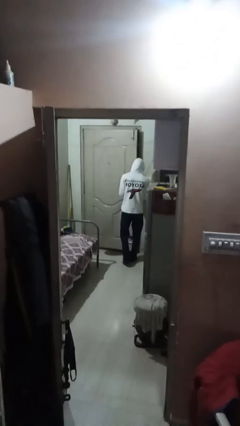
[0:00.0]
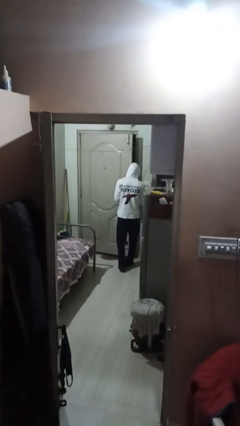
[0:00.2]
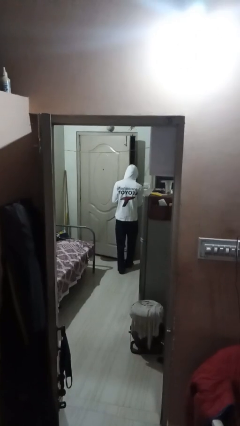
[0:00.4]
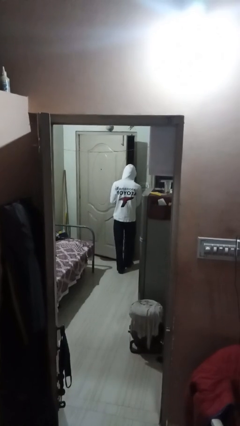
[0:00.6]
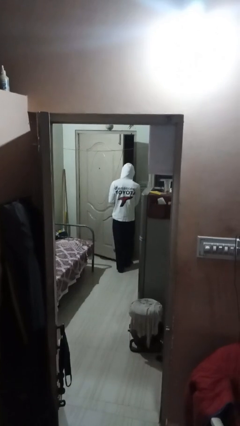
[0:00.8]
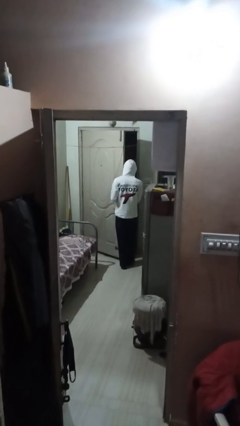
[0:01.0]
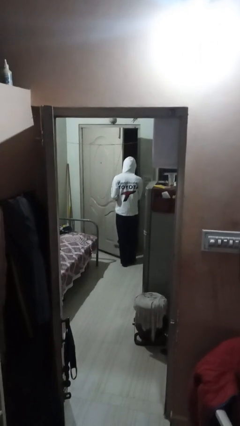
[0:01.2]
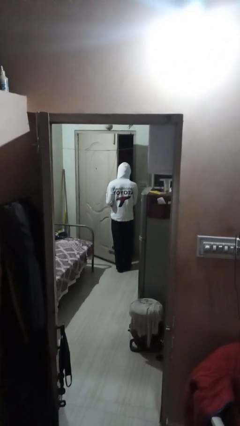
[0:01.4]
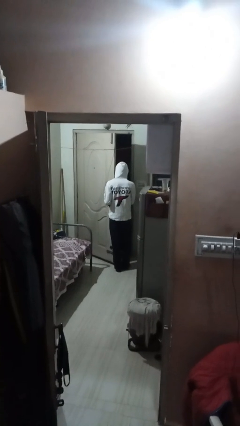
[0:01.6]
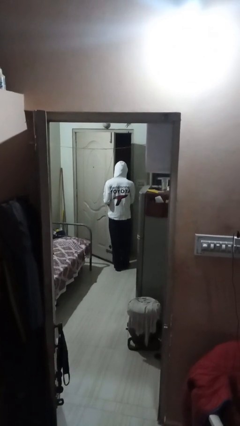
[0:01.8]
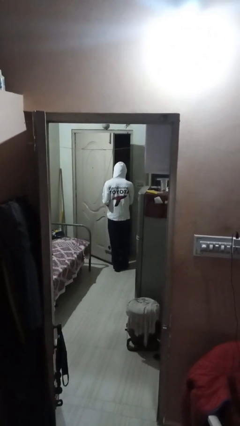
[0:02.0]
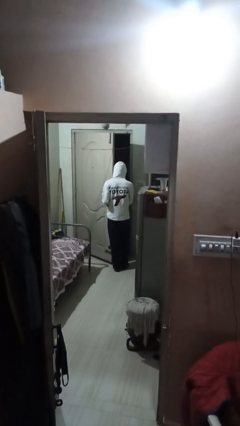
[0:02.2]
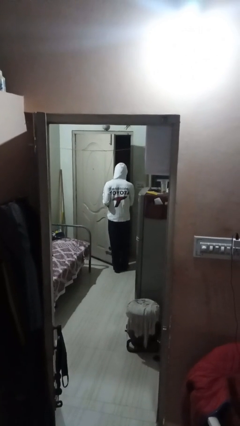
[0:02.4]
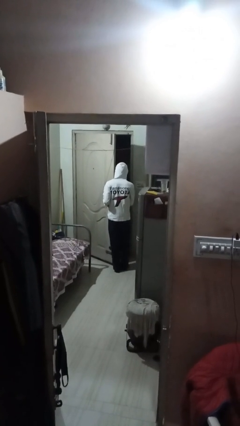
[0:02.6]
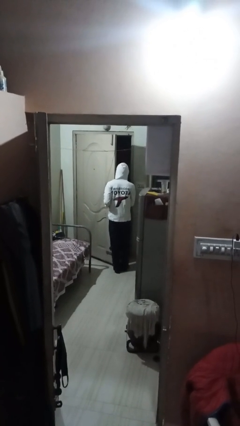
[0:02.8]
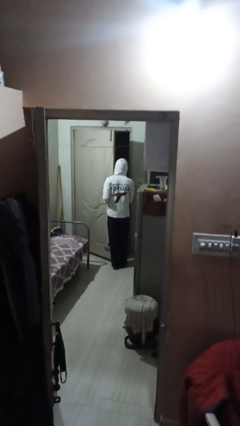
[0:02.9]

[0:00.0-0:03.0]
person opens facility door

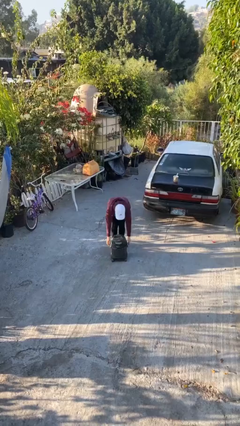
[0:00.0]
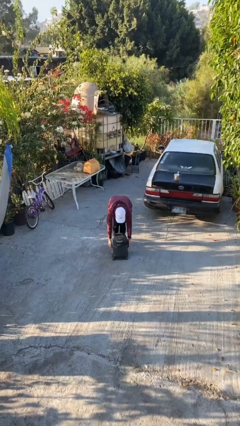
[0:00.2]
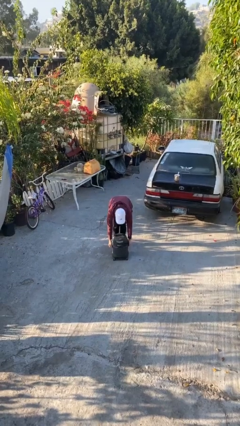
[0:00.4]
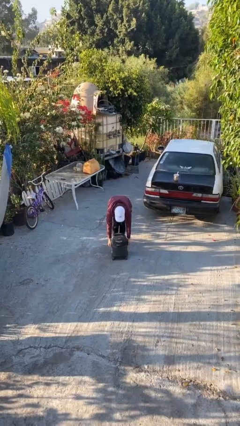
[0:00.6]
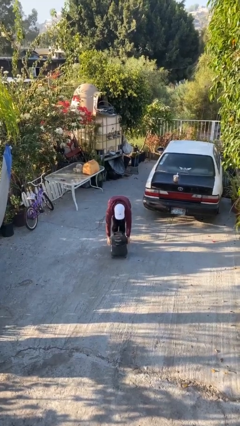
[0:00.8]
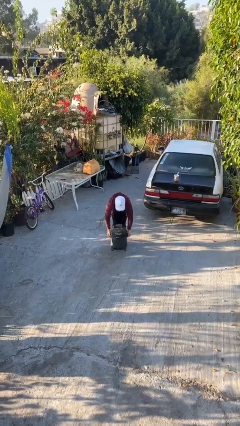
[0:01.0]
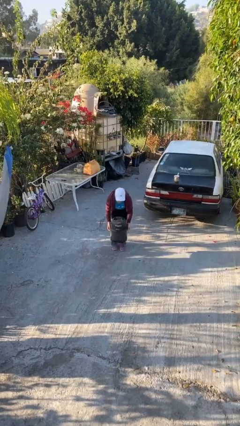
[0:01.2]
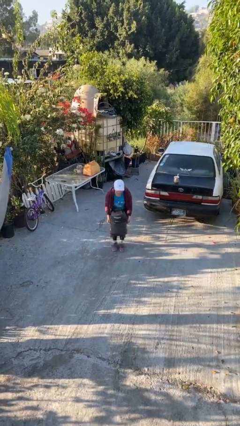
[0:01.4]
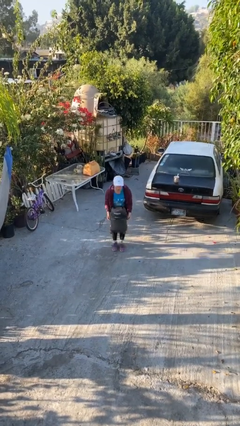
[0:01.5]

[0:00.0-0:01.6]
person picks up object from floor

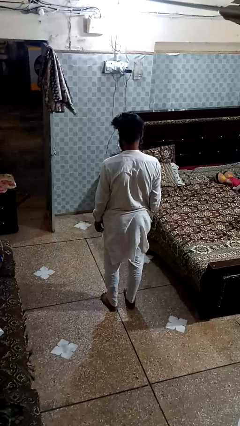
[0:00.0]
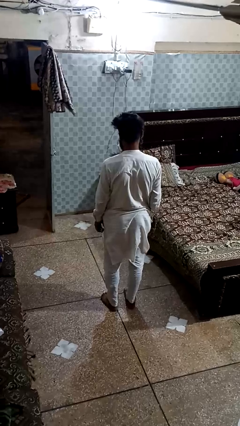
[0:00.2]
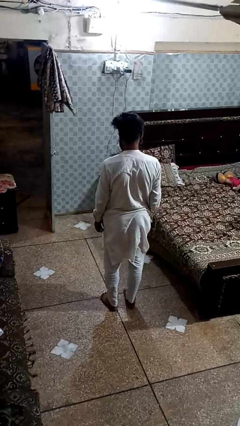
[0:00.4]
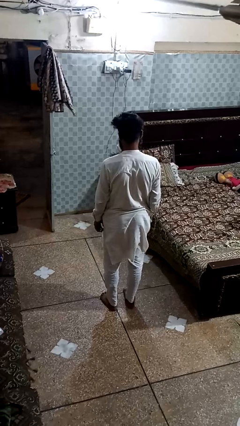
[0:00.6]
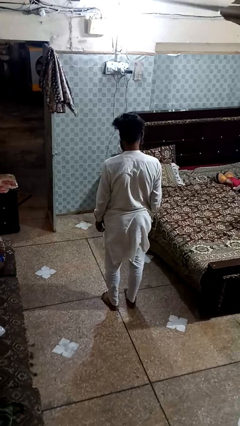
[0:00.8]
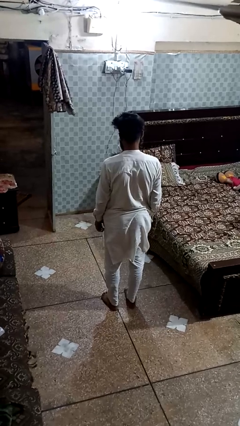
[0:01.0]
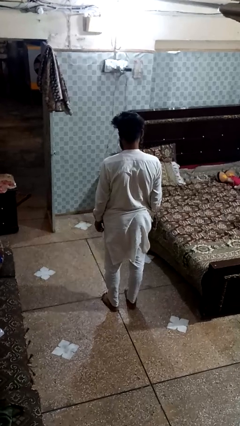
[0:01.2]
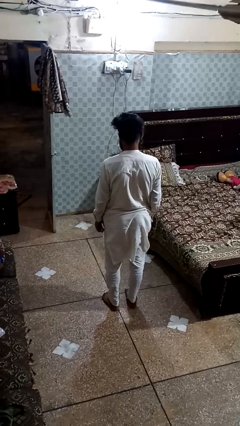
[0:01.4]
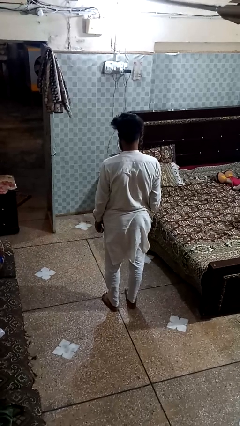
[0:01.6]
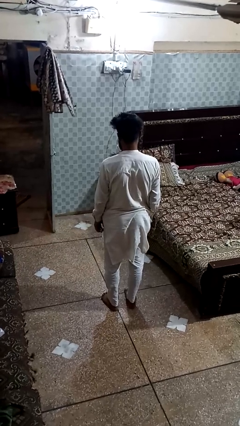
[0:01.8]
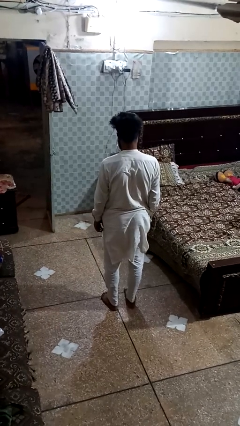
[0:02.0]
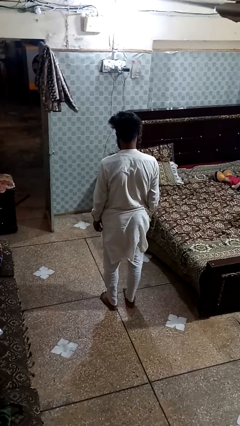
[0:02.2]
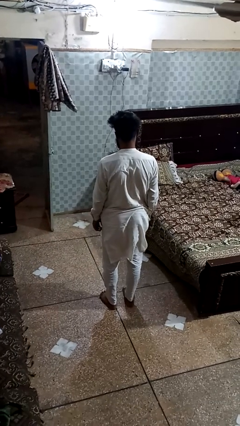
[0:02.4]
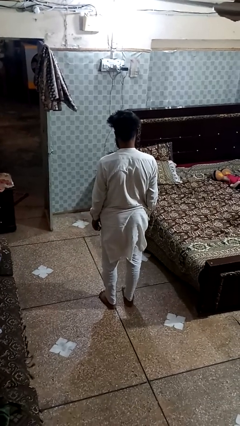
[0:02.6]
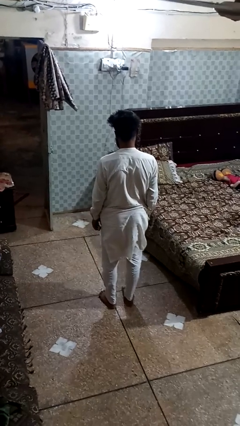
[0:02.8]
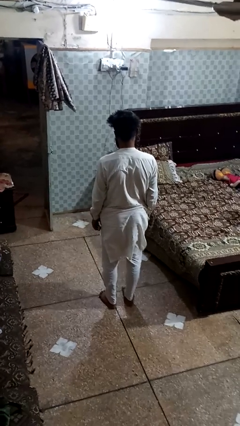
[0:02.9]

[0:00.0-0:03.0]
person exercises with plank

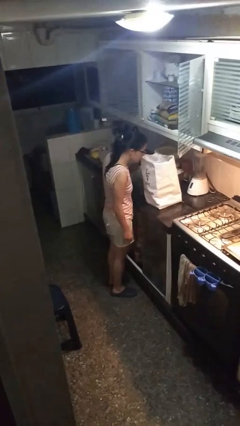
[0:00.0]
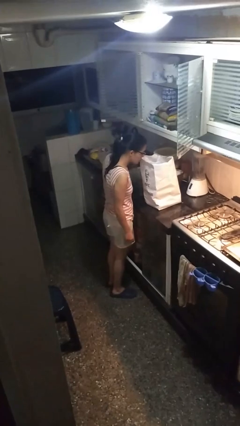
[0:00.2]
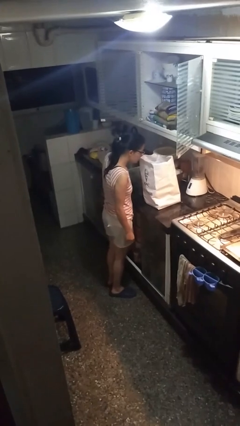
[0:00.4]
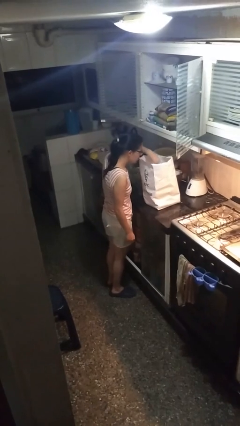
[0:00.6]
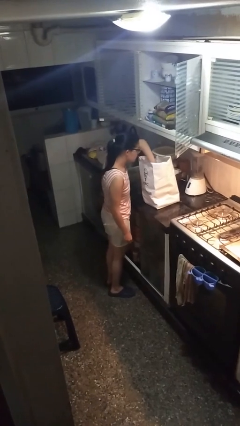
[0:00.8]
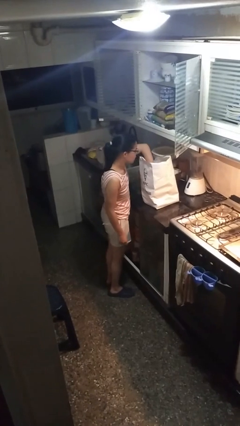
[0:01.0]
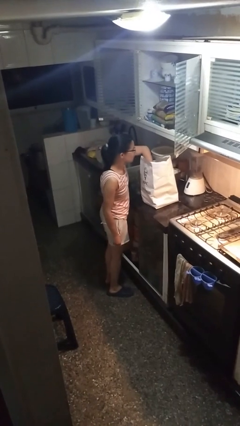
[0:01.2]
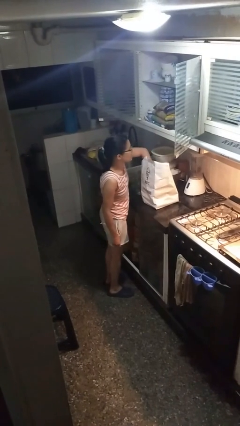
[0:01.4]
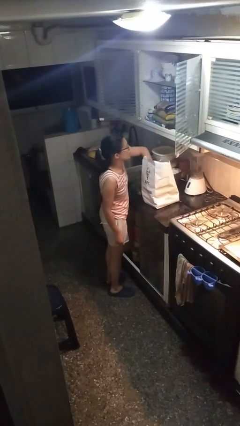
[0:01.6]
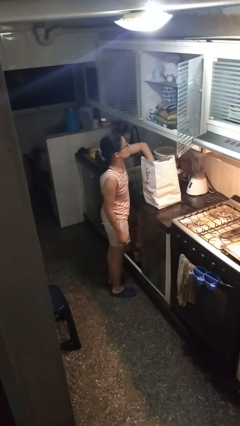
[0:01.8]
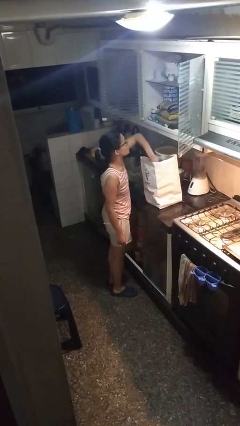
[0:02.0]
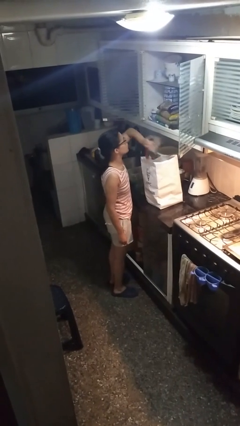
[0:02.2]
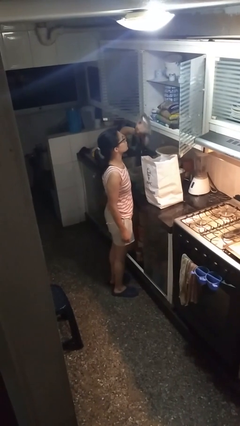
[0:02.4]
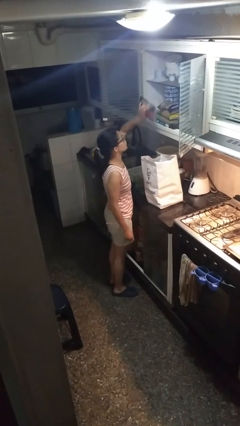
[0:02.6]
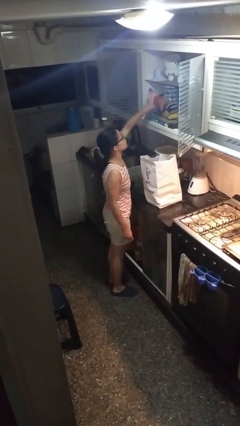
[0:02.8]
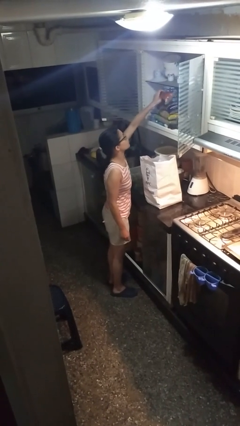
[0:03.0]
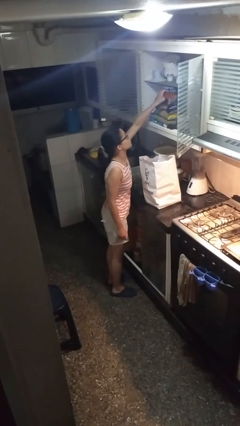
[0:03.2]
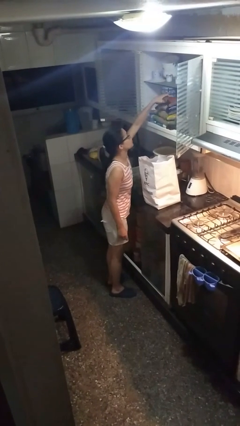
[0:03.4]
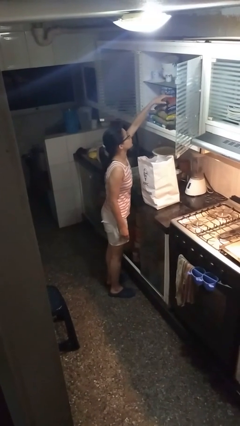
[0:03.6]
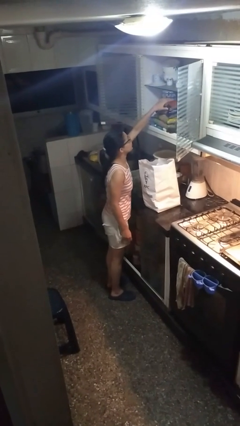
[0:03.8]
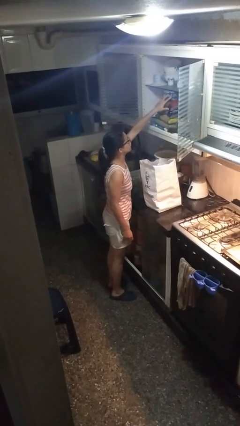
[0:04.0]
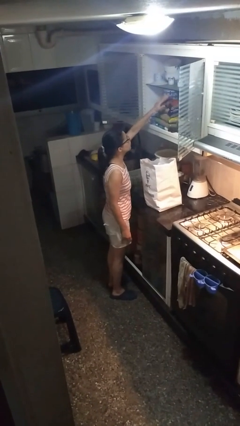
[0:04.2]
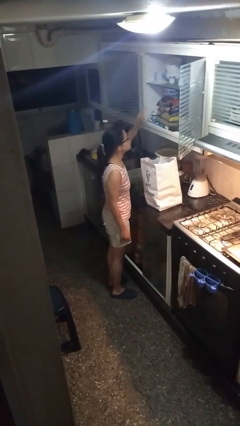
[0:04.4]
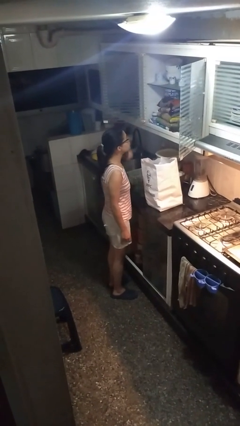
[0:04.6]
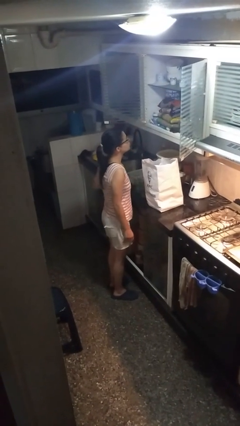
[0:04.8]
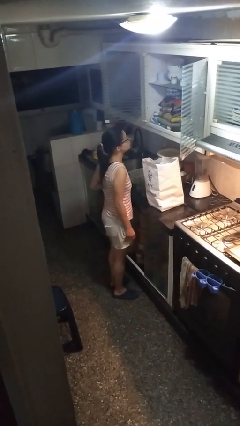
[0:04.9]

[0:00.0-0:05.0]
person loads groceries into cabinet

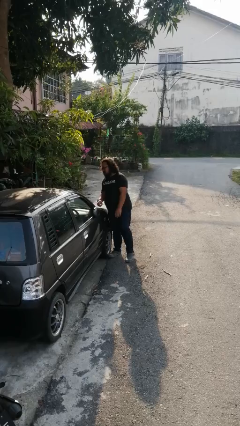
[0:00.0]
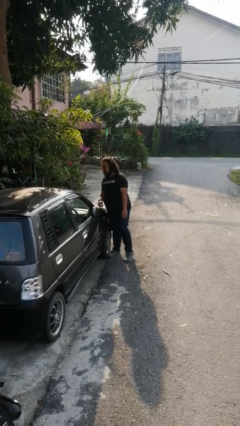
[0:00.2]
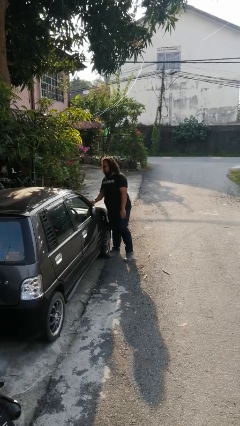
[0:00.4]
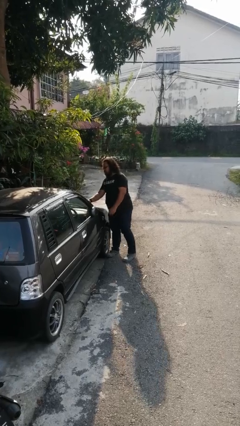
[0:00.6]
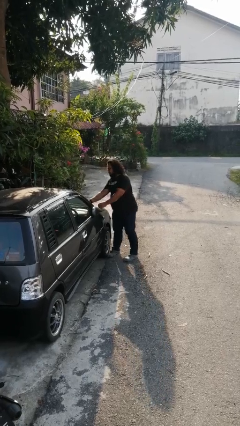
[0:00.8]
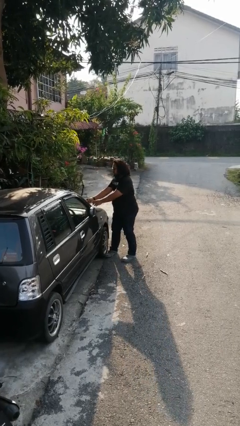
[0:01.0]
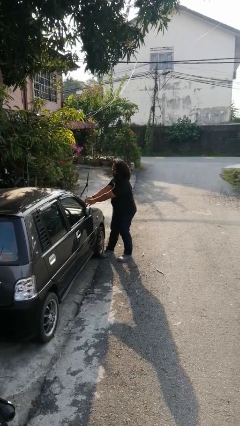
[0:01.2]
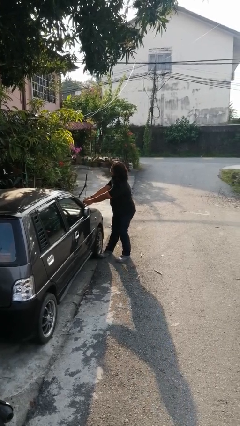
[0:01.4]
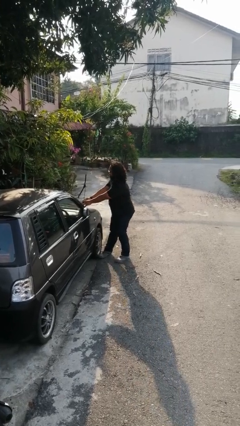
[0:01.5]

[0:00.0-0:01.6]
person flips up car wipers

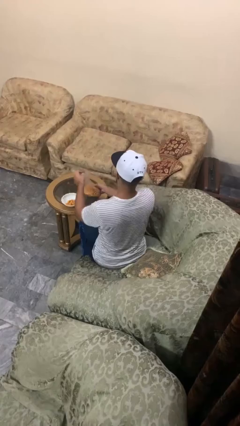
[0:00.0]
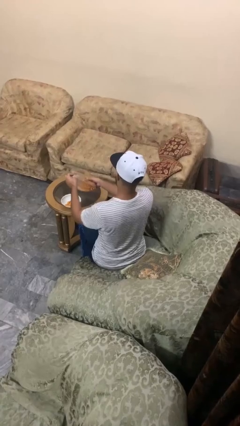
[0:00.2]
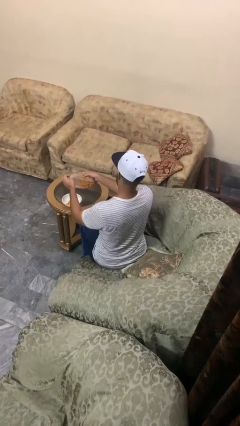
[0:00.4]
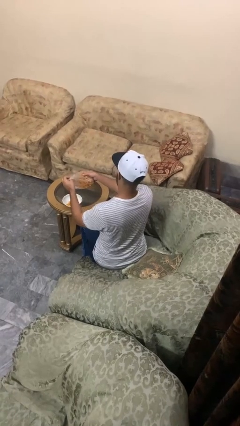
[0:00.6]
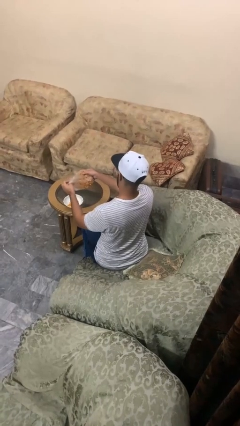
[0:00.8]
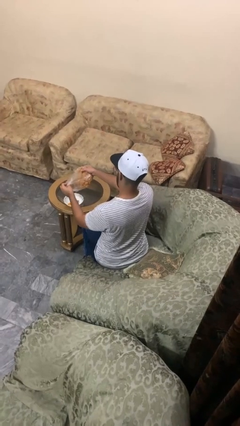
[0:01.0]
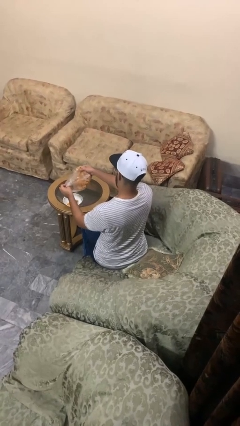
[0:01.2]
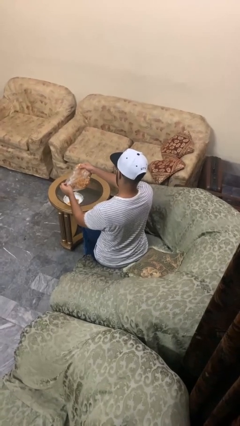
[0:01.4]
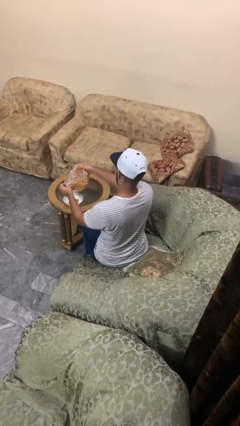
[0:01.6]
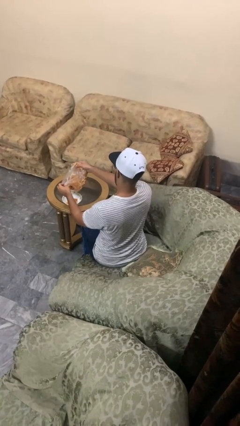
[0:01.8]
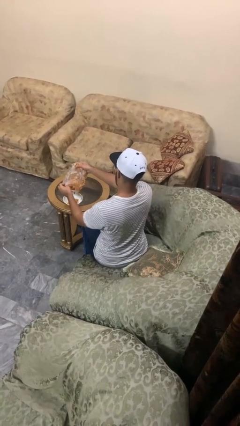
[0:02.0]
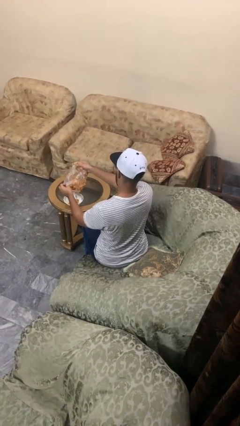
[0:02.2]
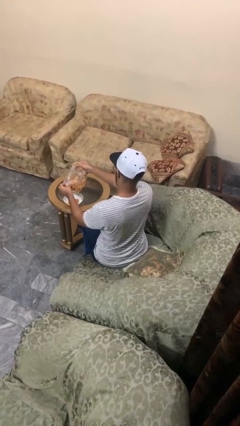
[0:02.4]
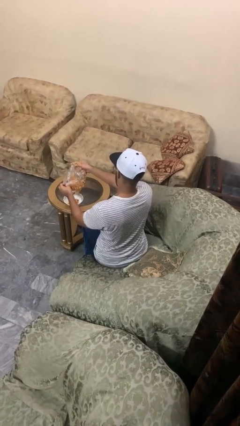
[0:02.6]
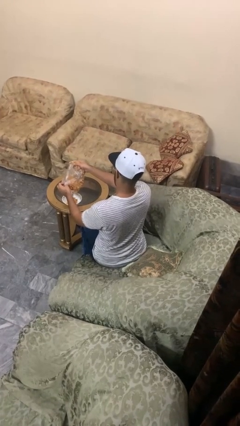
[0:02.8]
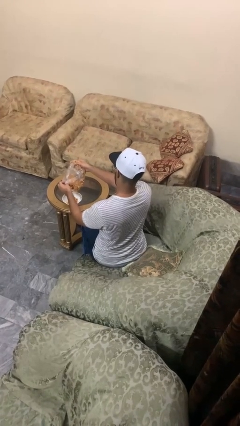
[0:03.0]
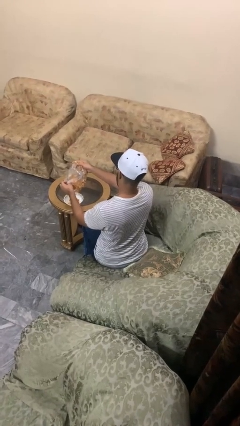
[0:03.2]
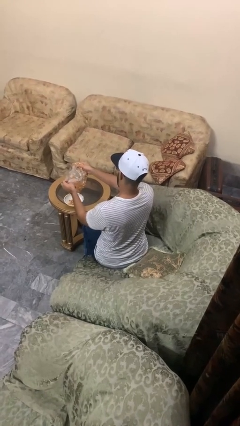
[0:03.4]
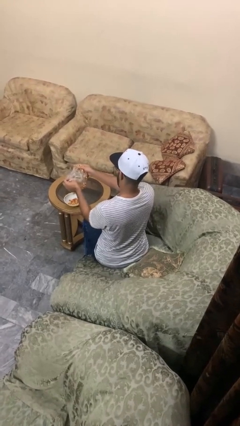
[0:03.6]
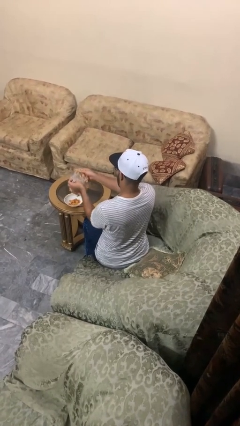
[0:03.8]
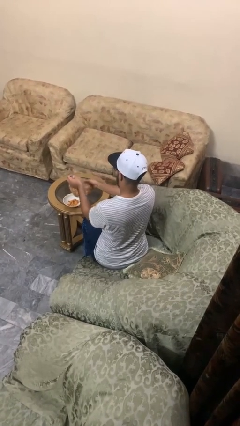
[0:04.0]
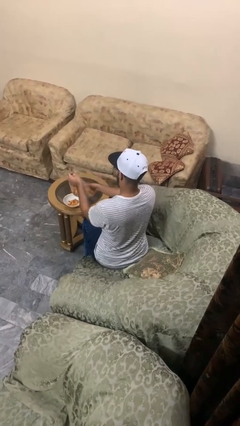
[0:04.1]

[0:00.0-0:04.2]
person pours into bowl
